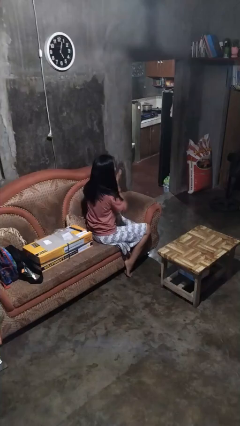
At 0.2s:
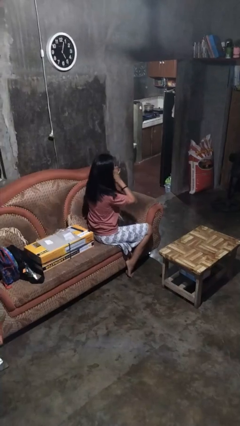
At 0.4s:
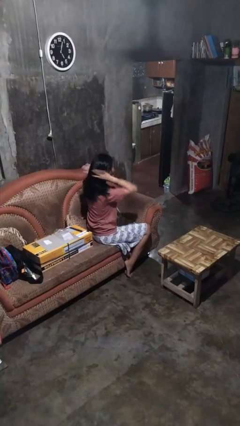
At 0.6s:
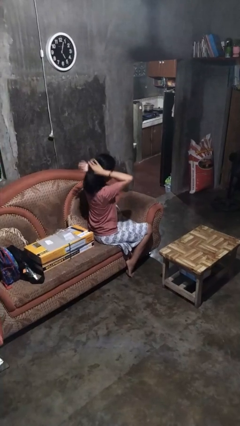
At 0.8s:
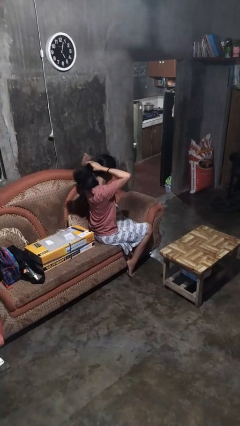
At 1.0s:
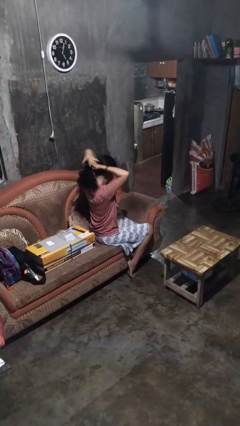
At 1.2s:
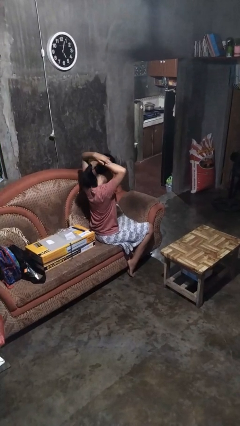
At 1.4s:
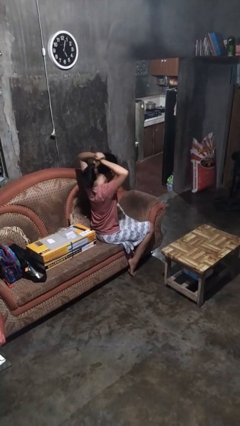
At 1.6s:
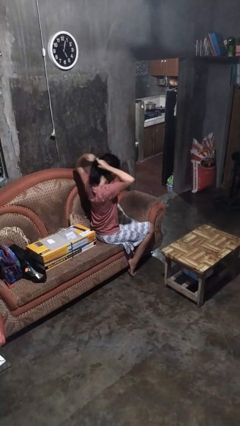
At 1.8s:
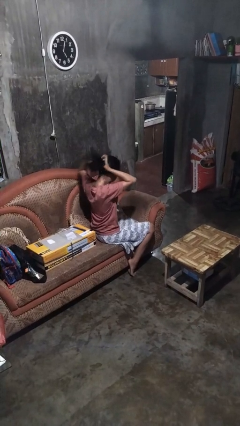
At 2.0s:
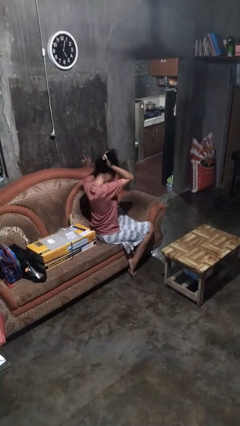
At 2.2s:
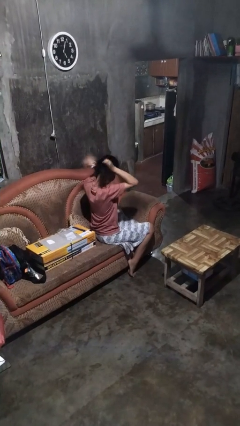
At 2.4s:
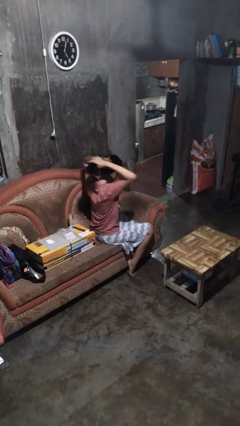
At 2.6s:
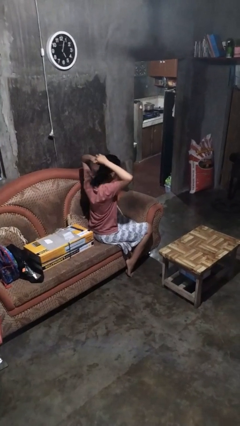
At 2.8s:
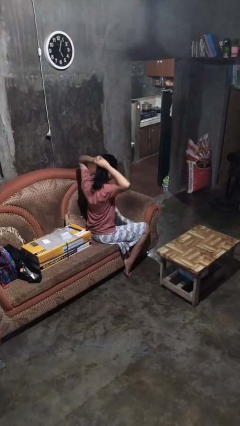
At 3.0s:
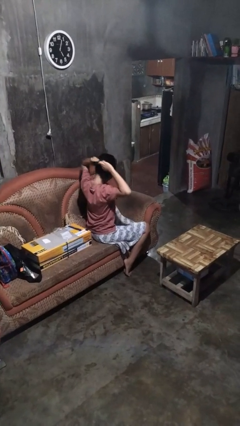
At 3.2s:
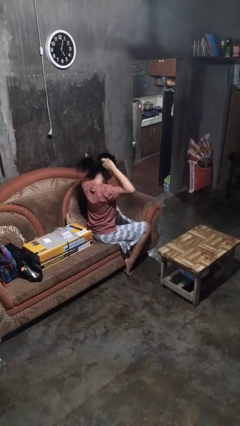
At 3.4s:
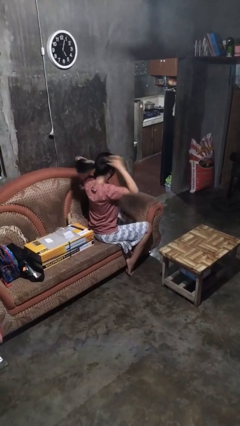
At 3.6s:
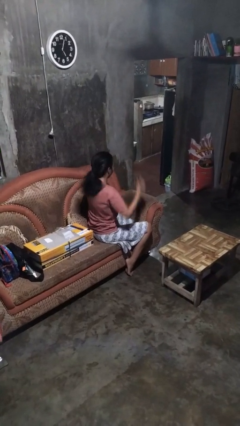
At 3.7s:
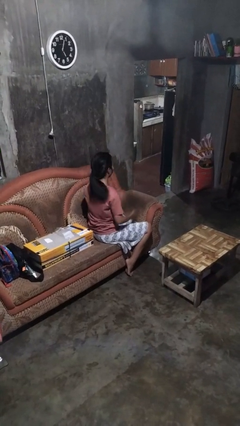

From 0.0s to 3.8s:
person puts hair in ponytail

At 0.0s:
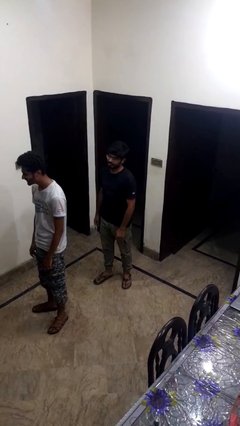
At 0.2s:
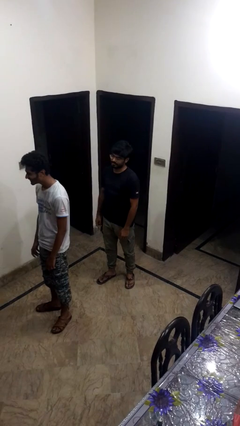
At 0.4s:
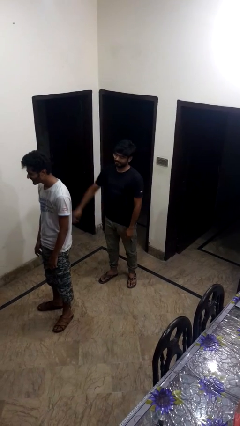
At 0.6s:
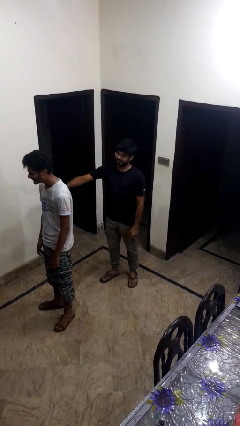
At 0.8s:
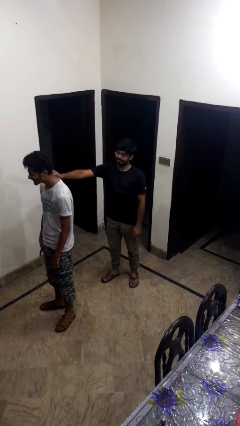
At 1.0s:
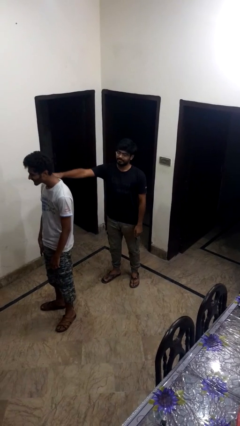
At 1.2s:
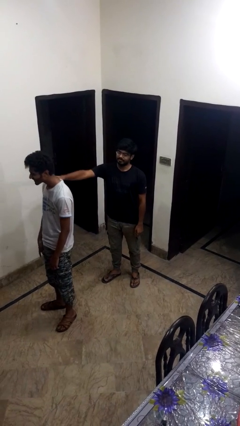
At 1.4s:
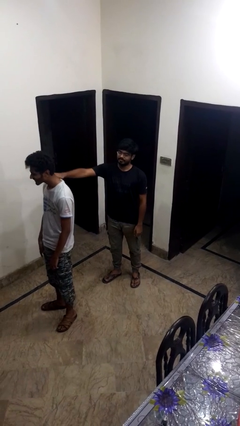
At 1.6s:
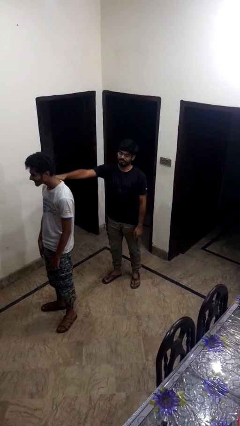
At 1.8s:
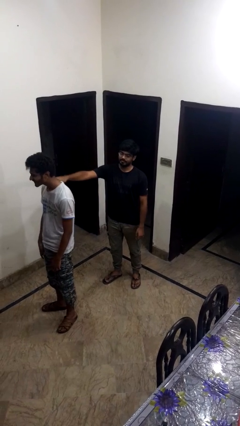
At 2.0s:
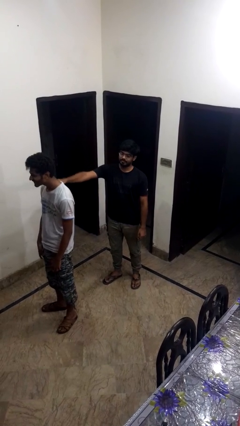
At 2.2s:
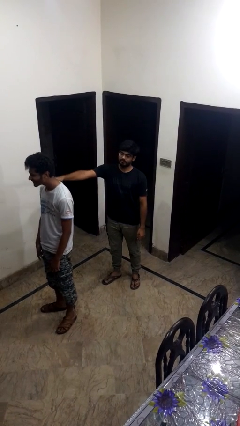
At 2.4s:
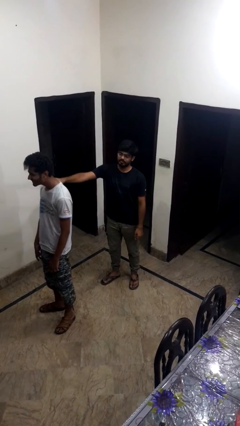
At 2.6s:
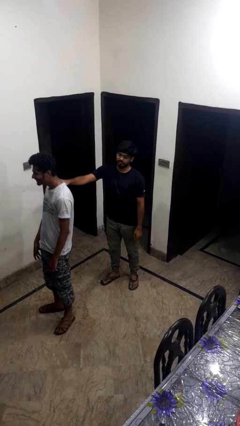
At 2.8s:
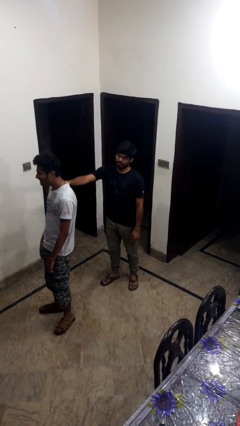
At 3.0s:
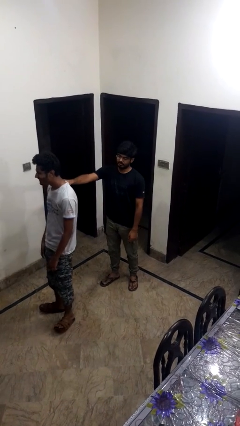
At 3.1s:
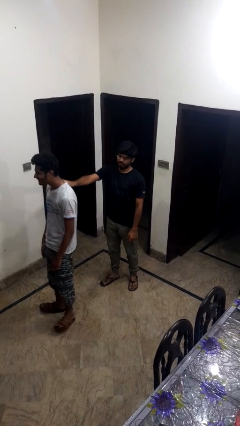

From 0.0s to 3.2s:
person touches back of person

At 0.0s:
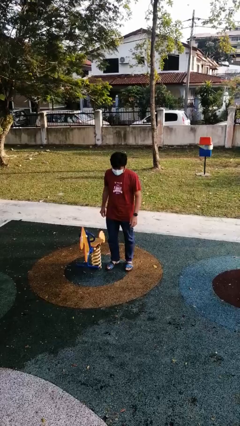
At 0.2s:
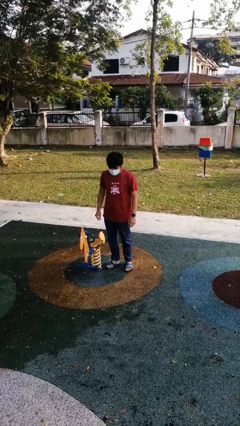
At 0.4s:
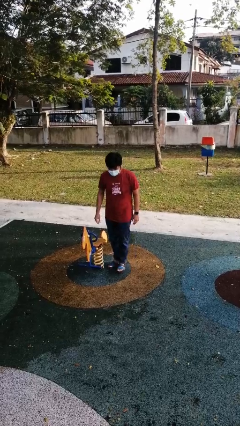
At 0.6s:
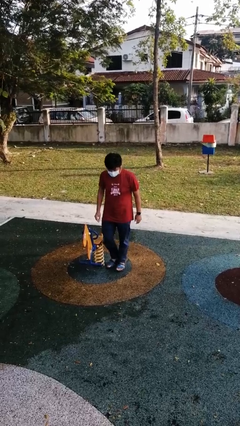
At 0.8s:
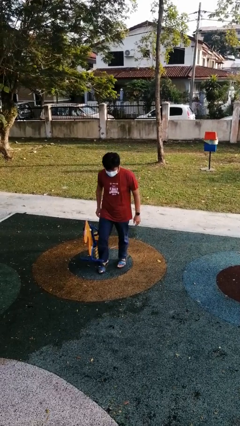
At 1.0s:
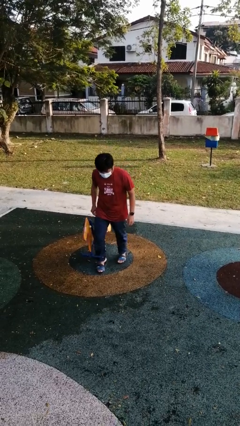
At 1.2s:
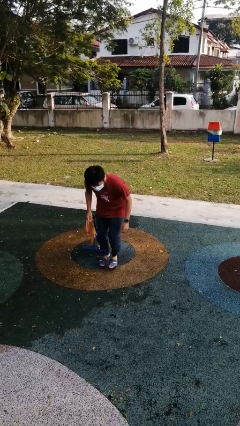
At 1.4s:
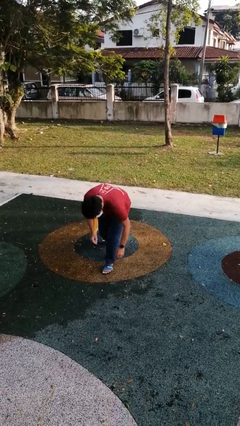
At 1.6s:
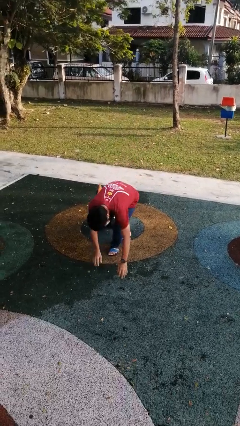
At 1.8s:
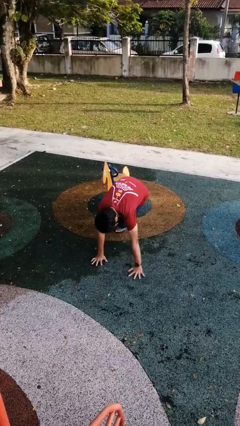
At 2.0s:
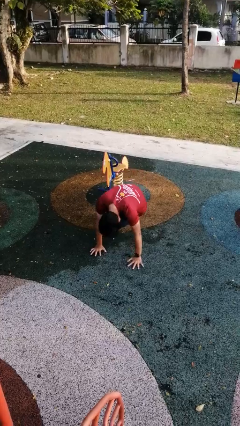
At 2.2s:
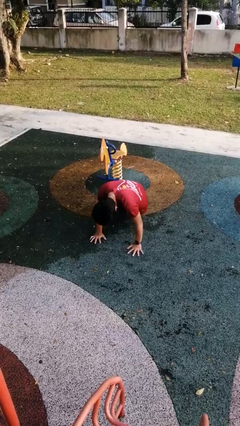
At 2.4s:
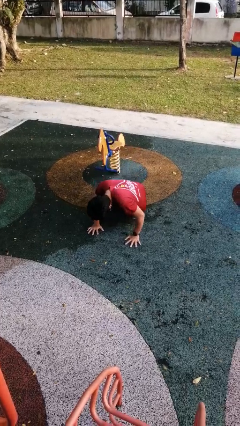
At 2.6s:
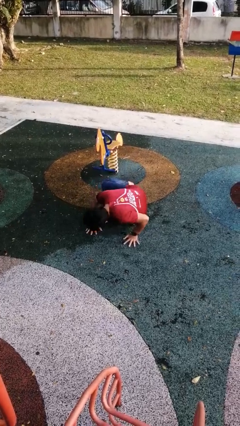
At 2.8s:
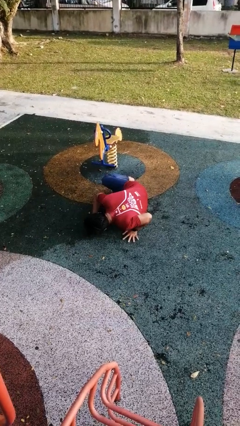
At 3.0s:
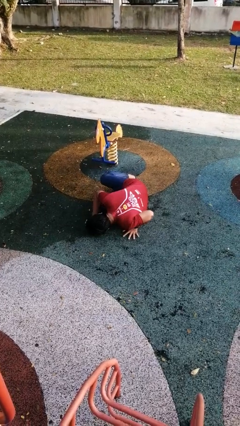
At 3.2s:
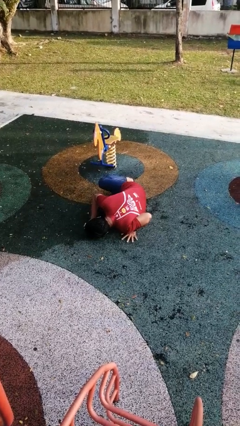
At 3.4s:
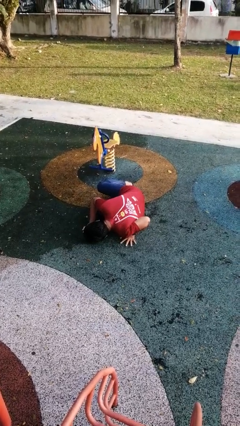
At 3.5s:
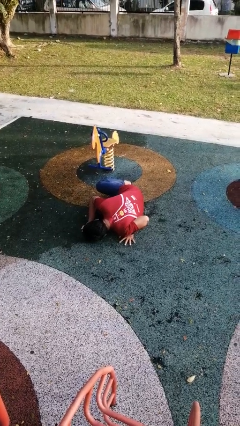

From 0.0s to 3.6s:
person trips on object on floor

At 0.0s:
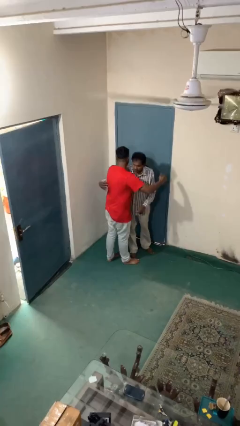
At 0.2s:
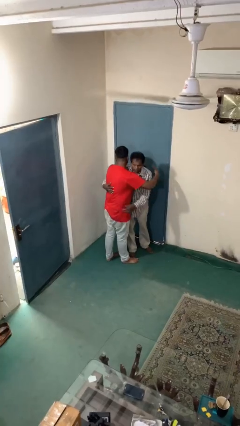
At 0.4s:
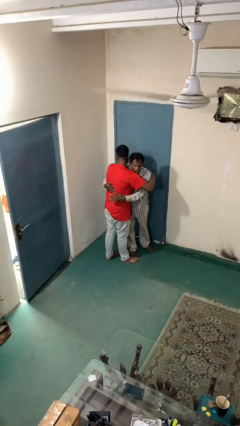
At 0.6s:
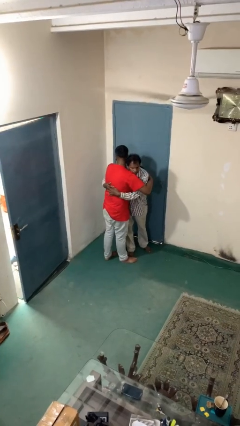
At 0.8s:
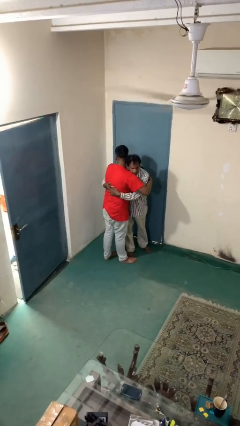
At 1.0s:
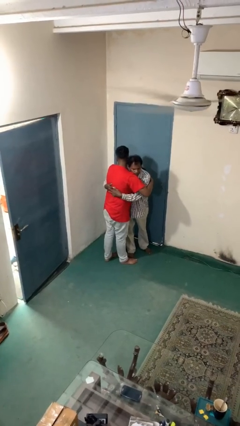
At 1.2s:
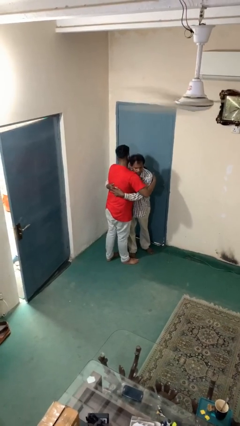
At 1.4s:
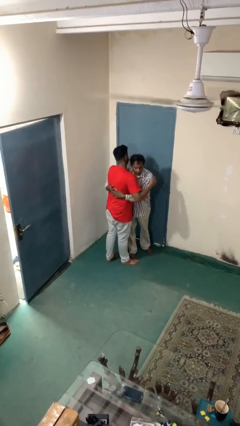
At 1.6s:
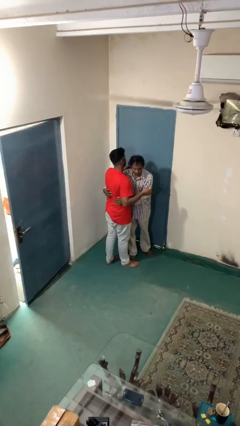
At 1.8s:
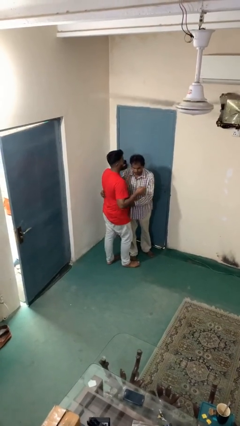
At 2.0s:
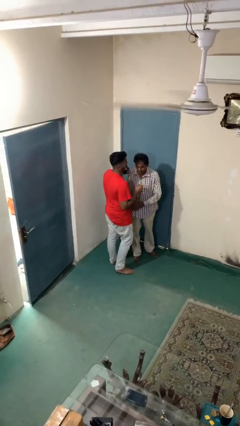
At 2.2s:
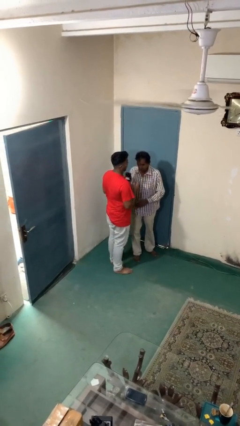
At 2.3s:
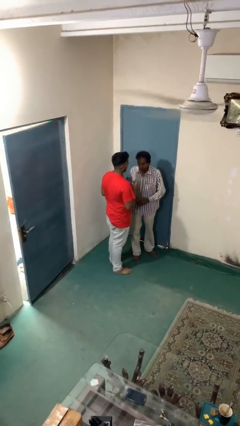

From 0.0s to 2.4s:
person embraces person

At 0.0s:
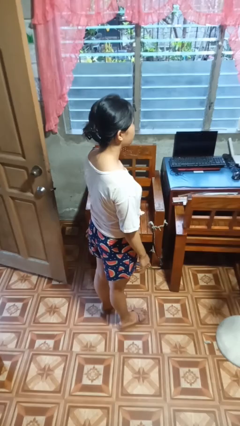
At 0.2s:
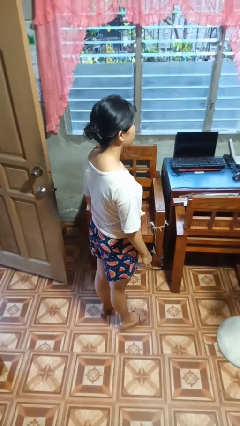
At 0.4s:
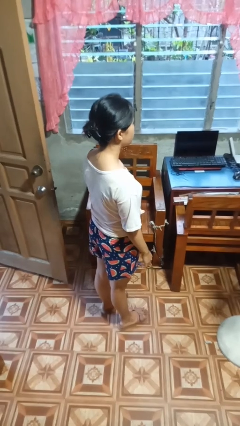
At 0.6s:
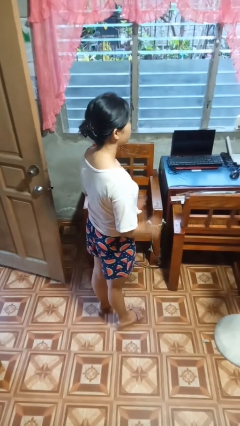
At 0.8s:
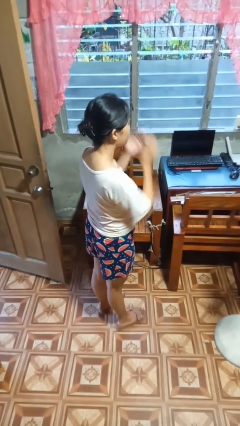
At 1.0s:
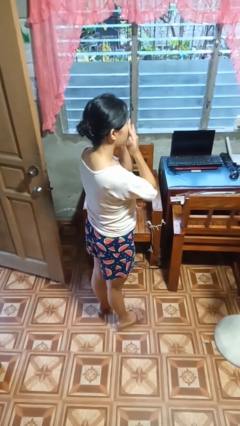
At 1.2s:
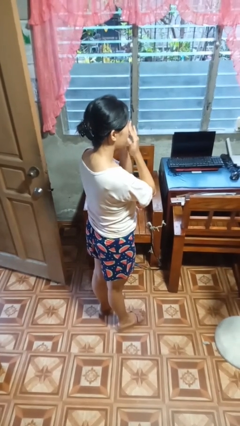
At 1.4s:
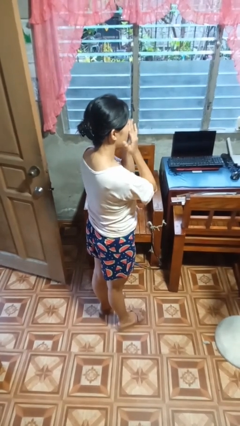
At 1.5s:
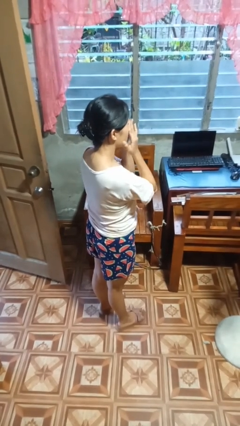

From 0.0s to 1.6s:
person rubs eyes

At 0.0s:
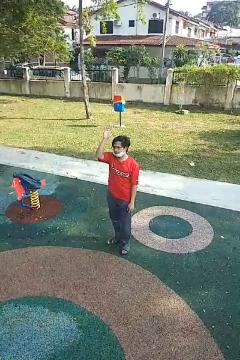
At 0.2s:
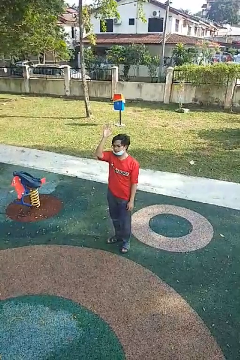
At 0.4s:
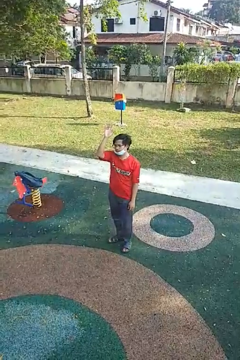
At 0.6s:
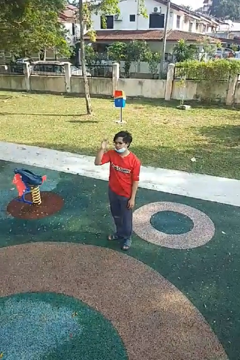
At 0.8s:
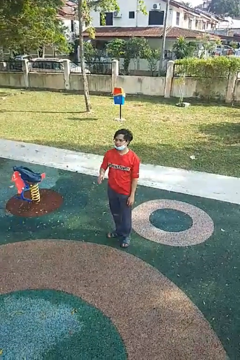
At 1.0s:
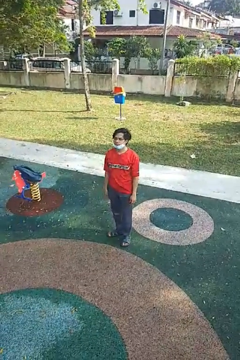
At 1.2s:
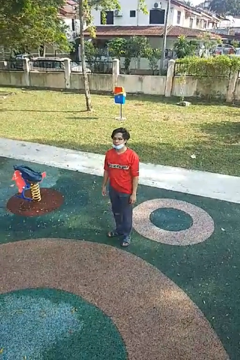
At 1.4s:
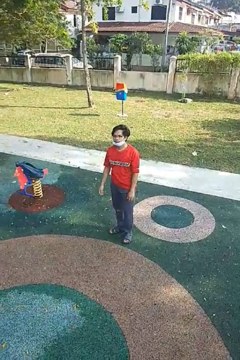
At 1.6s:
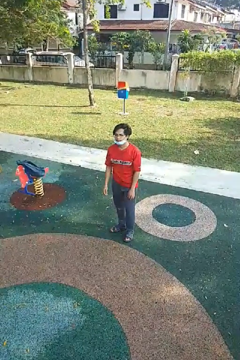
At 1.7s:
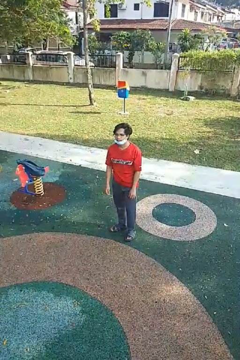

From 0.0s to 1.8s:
person gestures lower hand

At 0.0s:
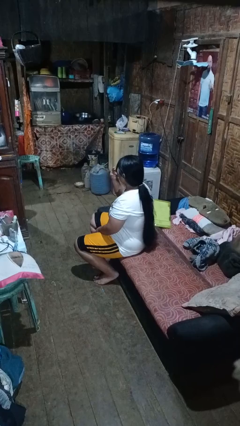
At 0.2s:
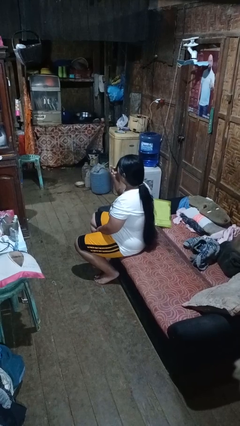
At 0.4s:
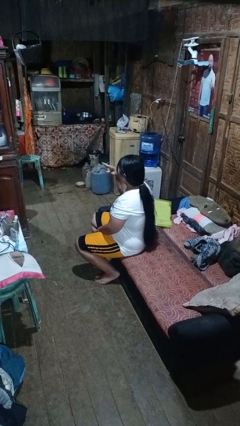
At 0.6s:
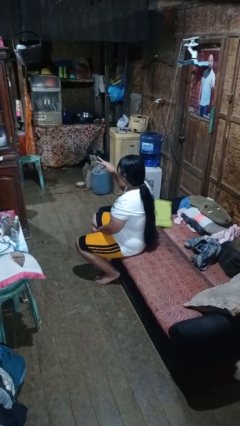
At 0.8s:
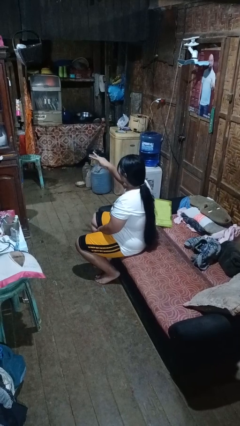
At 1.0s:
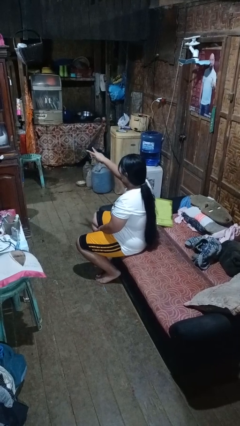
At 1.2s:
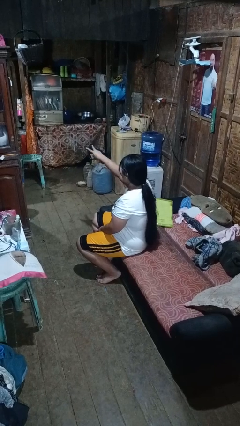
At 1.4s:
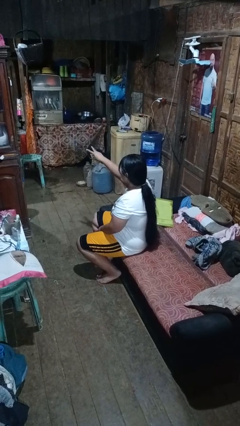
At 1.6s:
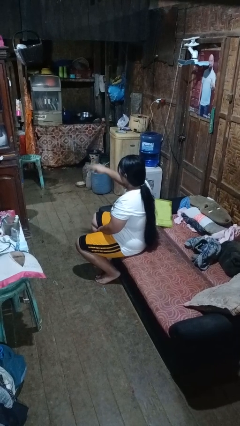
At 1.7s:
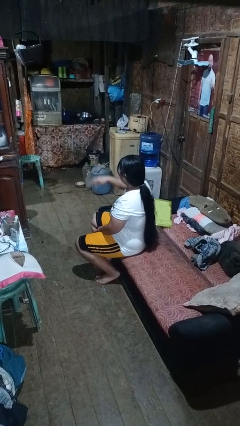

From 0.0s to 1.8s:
person gestures watch closely
